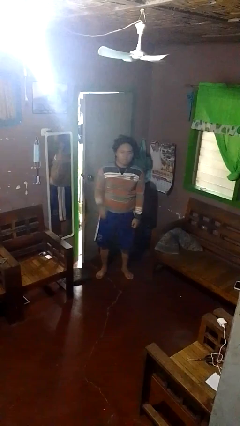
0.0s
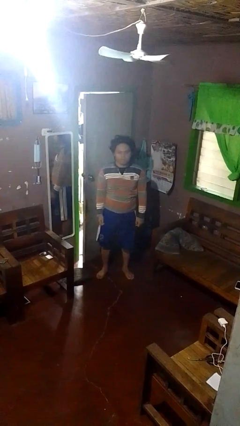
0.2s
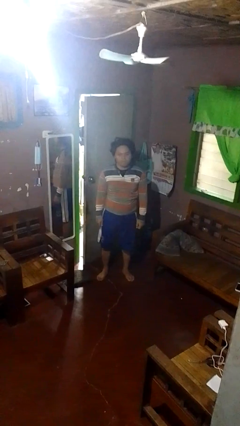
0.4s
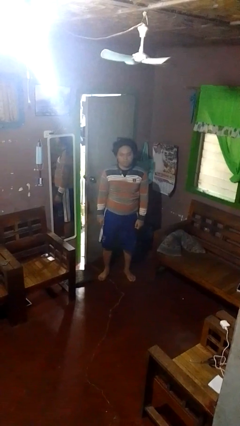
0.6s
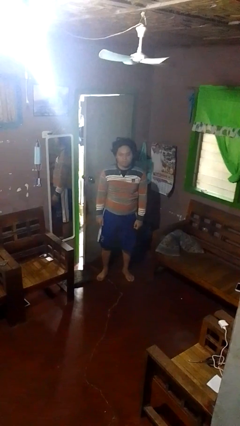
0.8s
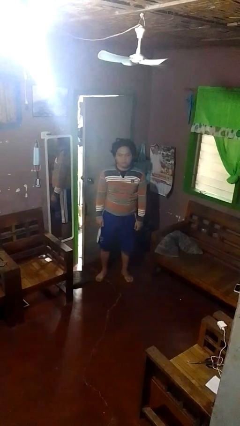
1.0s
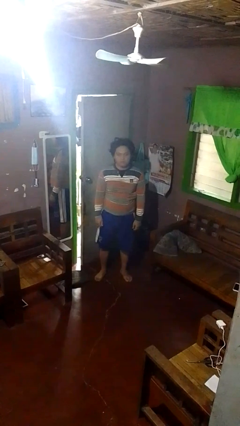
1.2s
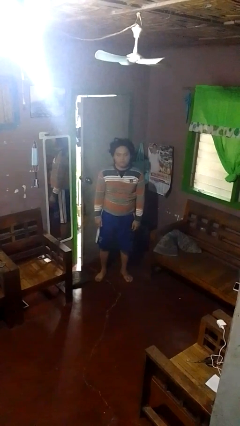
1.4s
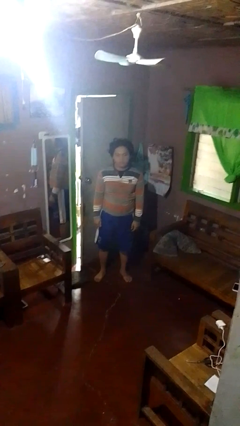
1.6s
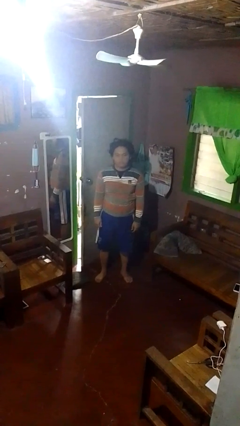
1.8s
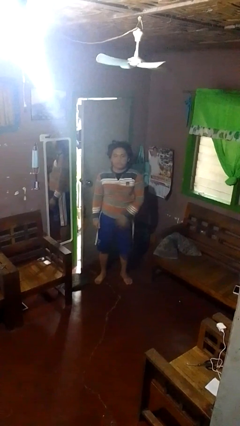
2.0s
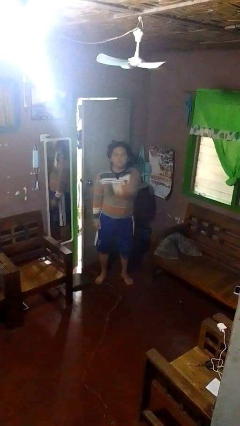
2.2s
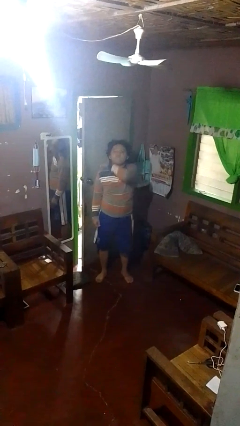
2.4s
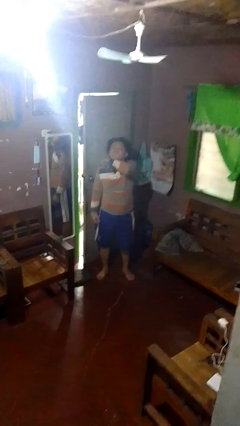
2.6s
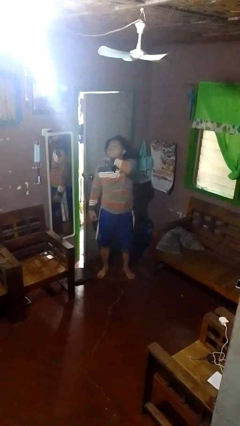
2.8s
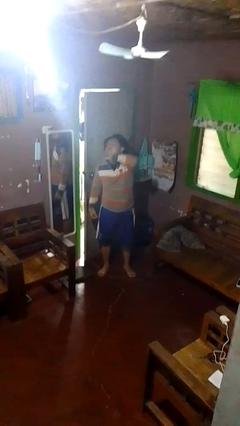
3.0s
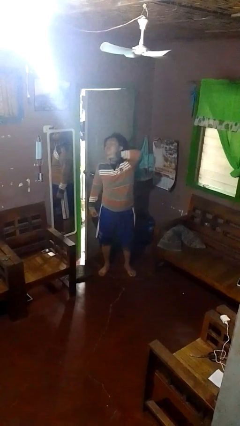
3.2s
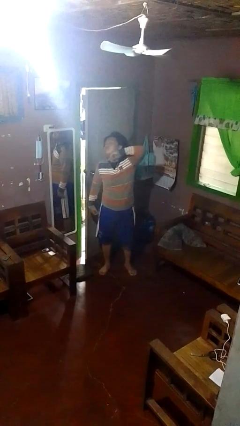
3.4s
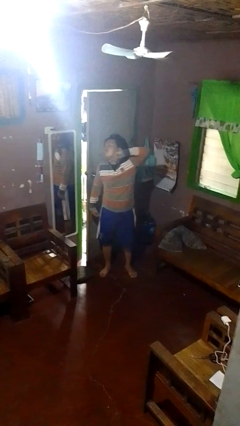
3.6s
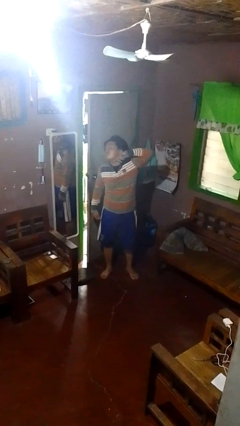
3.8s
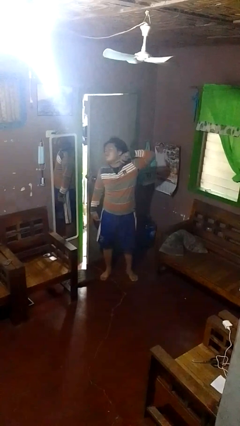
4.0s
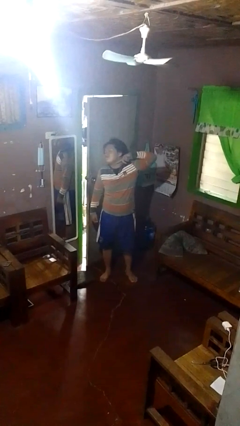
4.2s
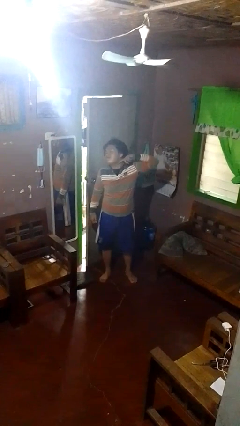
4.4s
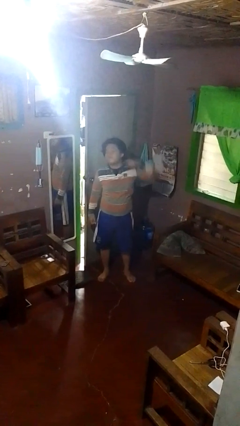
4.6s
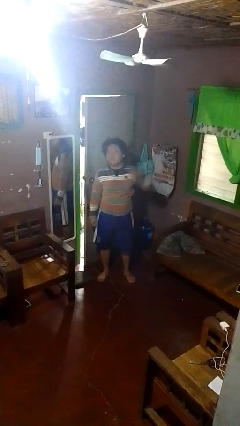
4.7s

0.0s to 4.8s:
person dries hair with hairdryer

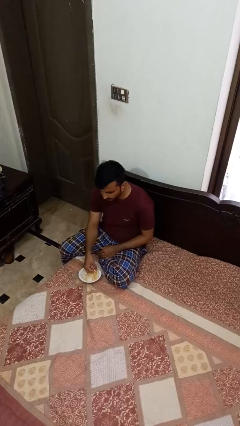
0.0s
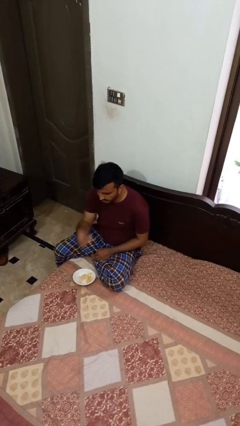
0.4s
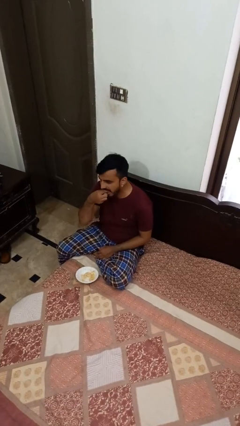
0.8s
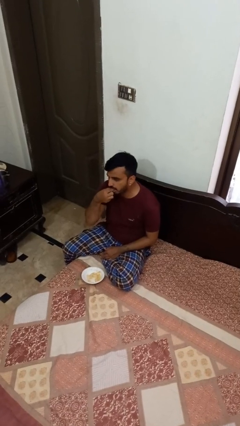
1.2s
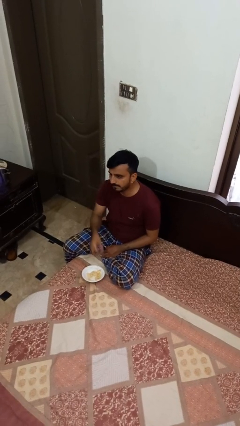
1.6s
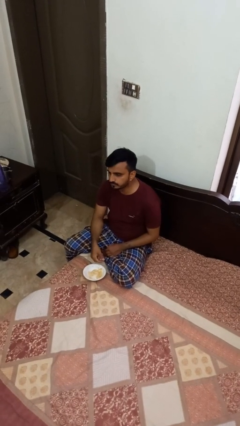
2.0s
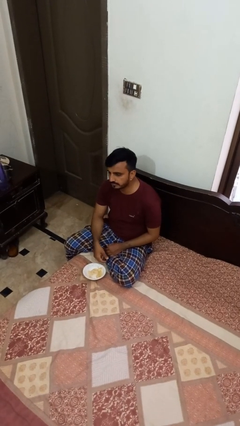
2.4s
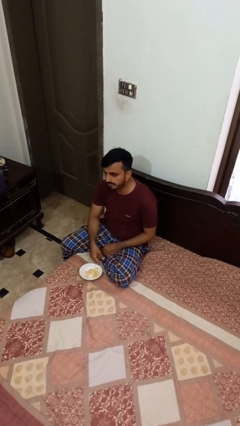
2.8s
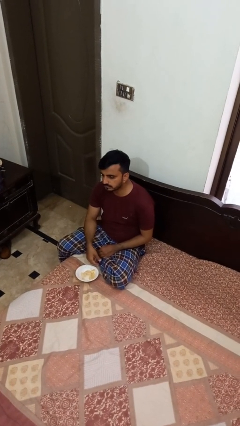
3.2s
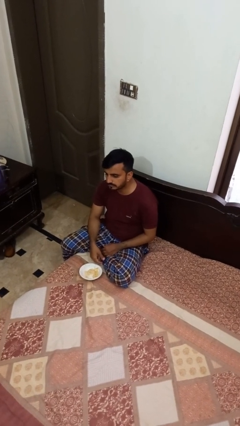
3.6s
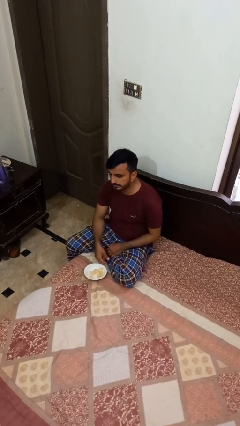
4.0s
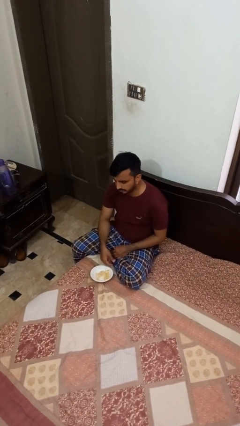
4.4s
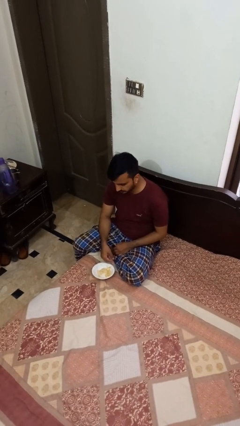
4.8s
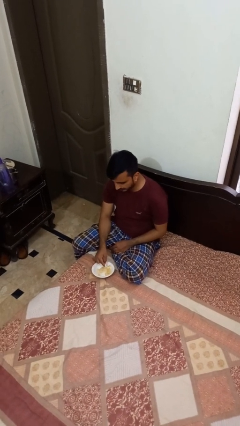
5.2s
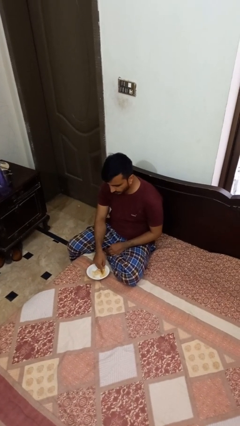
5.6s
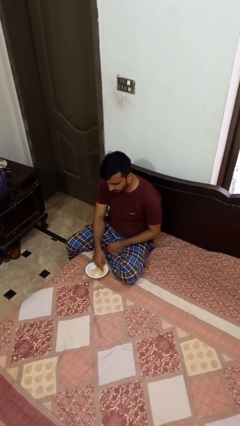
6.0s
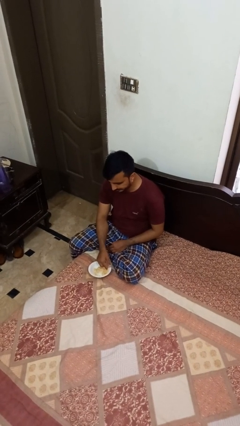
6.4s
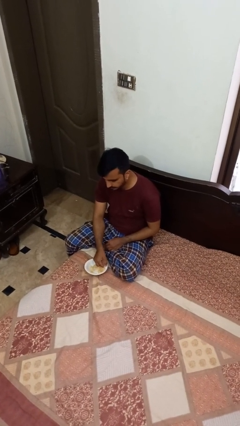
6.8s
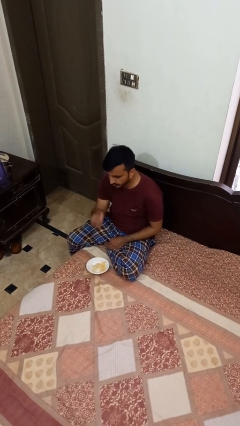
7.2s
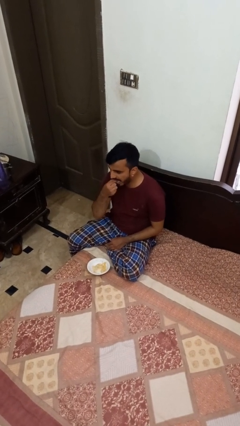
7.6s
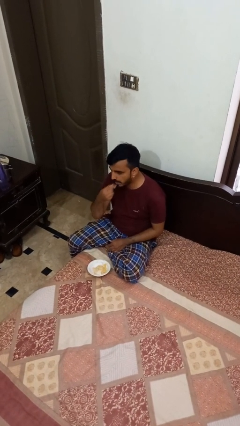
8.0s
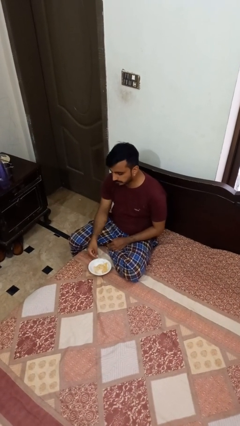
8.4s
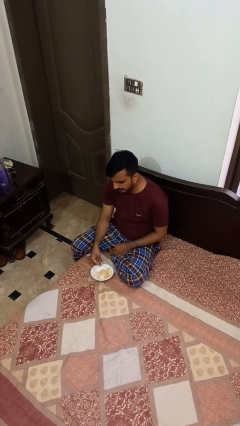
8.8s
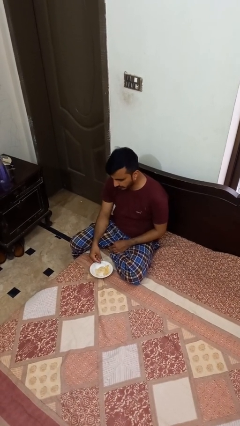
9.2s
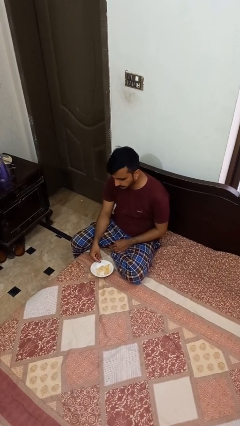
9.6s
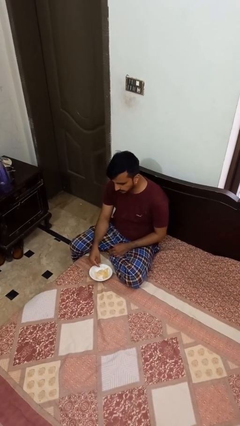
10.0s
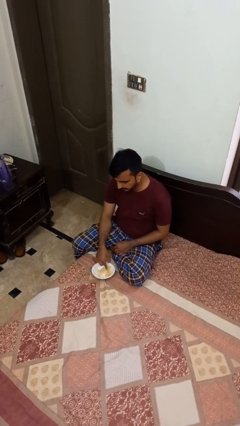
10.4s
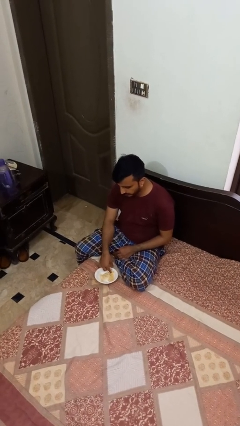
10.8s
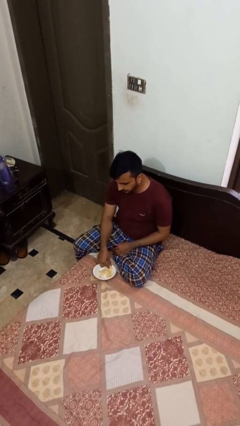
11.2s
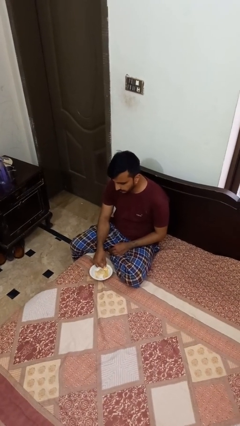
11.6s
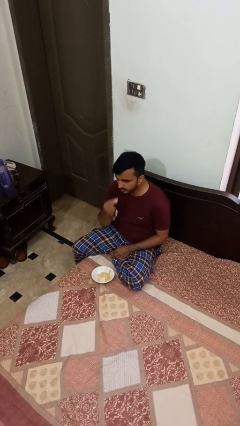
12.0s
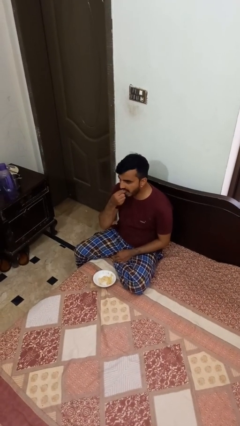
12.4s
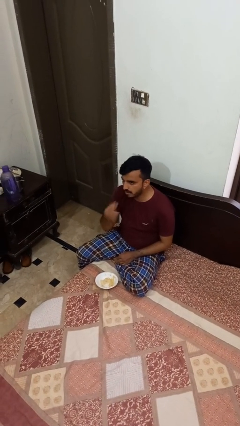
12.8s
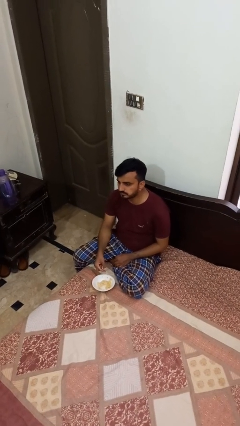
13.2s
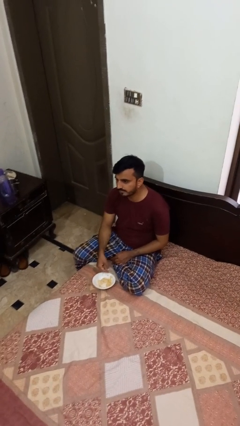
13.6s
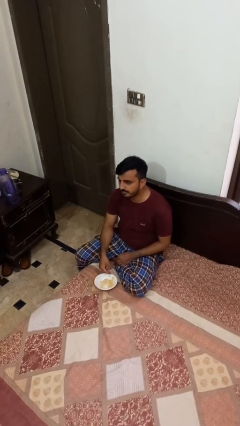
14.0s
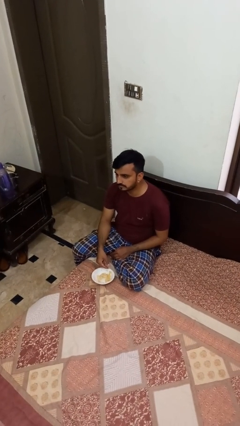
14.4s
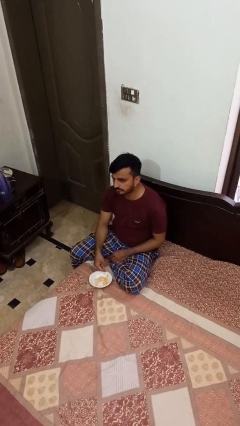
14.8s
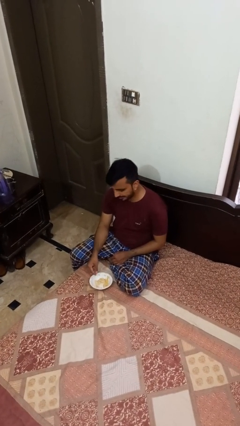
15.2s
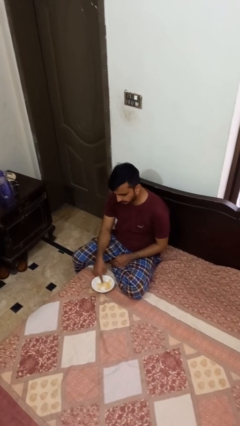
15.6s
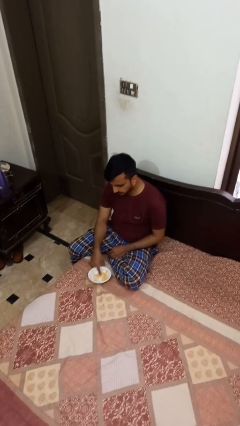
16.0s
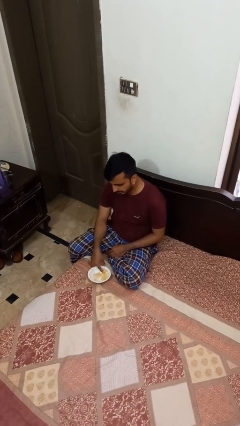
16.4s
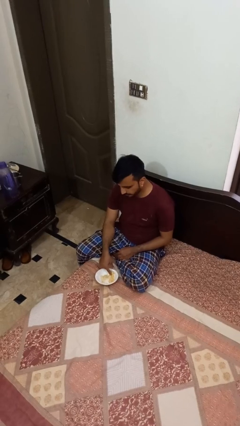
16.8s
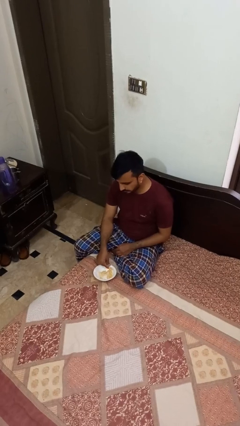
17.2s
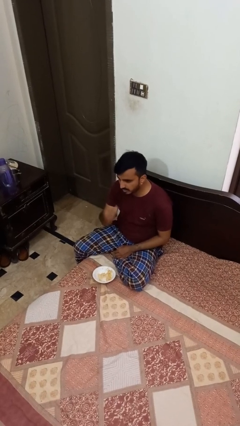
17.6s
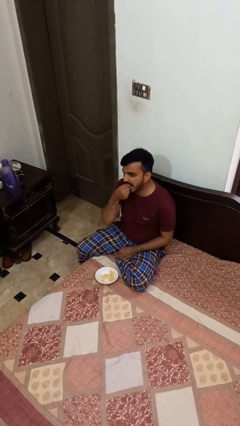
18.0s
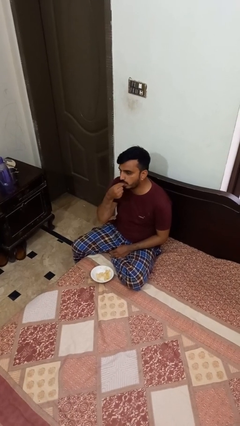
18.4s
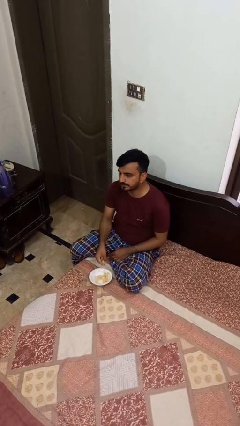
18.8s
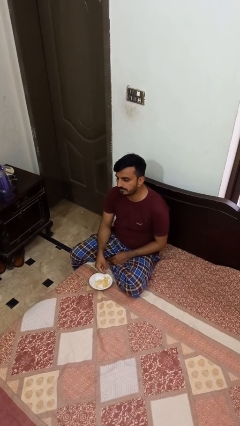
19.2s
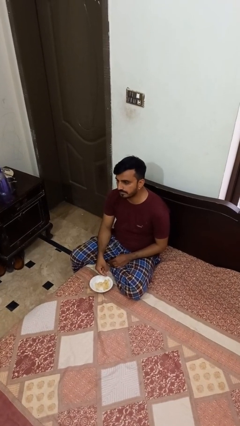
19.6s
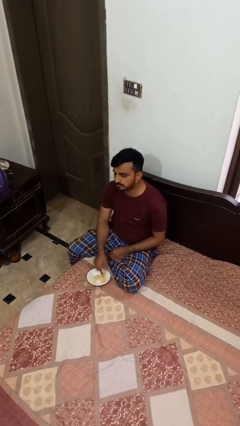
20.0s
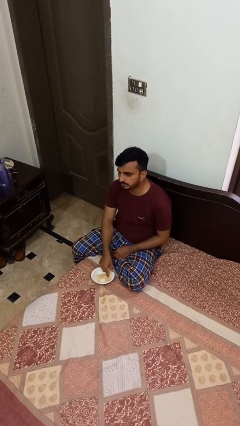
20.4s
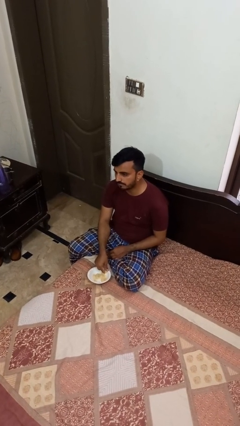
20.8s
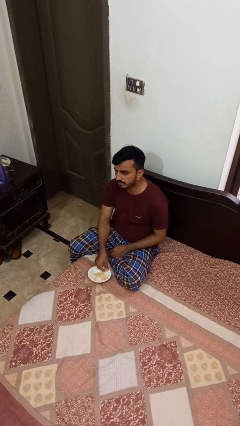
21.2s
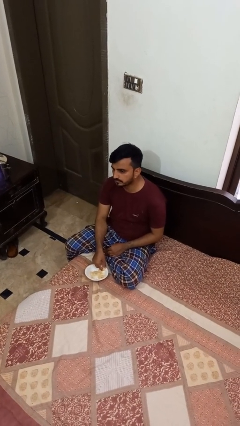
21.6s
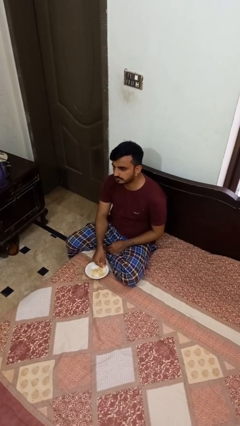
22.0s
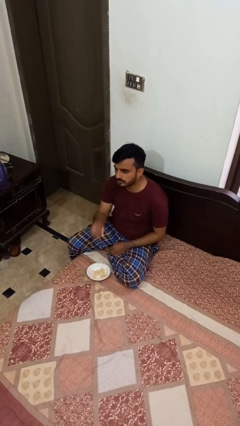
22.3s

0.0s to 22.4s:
person eats with hands

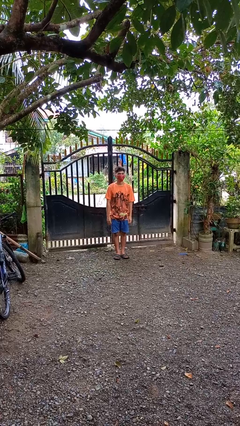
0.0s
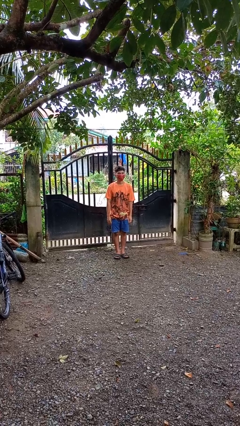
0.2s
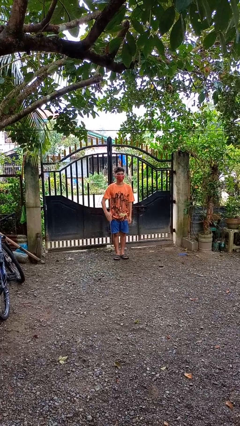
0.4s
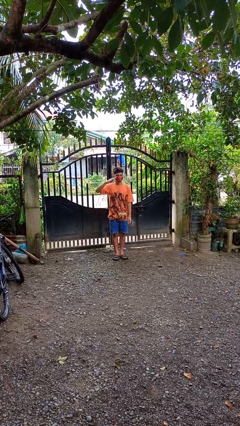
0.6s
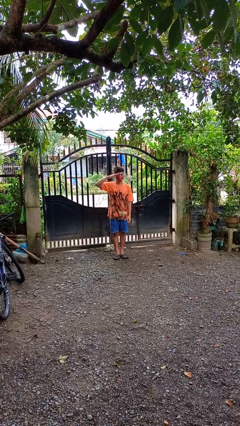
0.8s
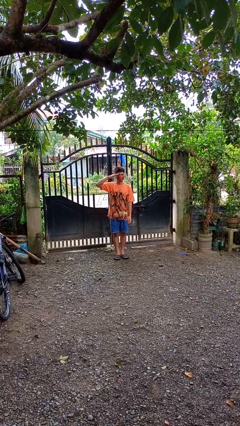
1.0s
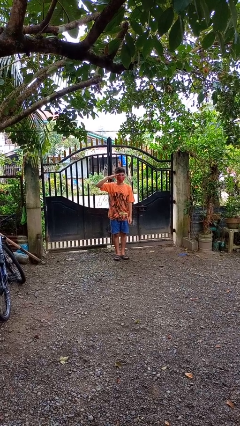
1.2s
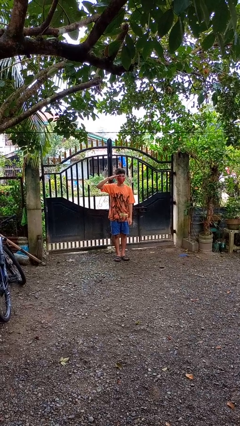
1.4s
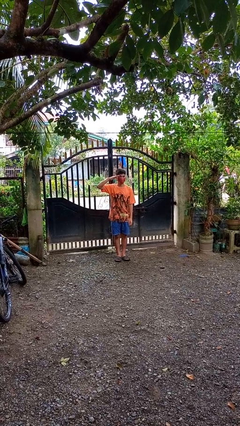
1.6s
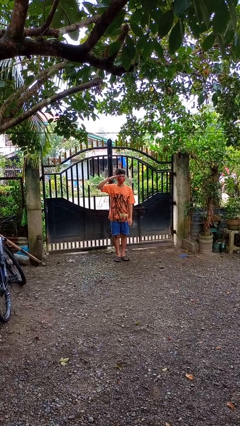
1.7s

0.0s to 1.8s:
person salutes
